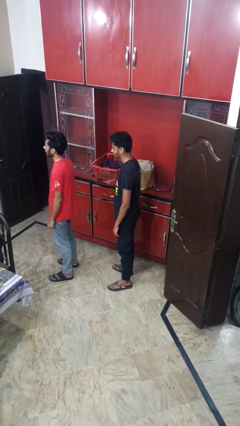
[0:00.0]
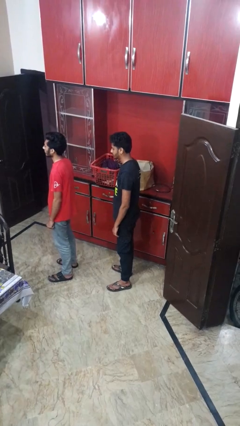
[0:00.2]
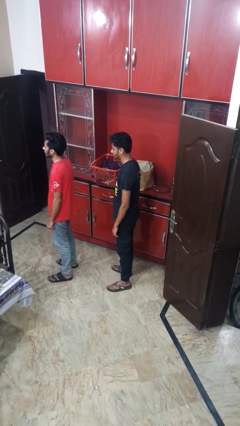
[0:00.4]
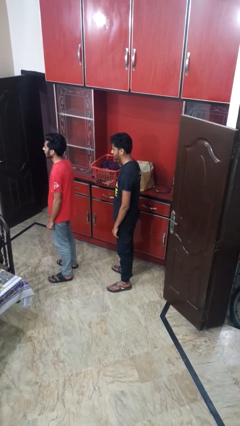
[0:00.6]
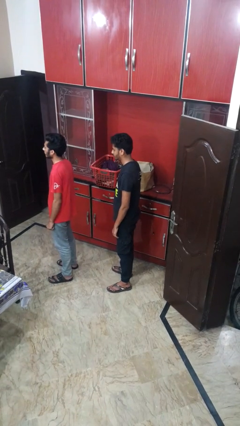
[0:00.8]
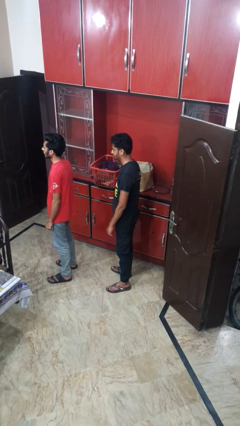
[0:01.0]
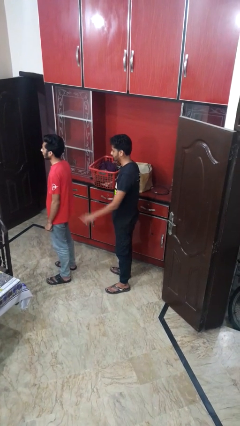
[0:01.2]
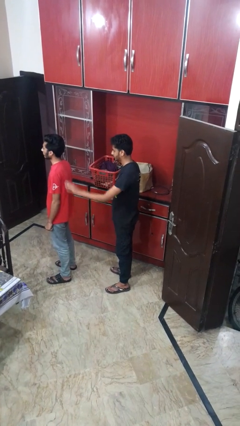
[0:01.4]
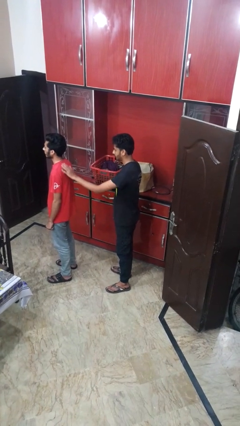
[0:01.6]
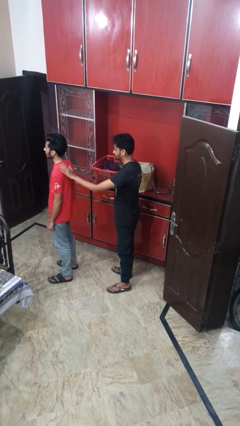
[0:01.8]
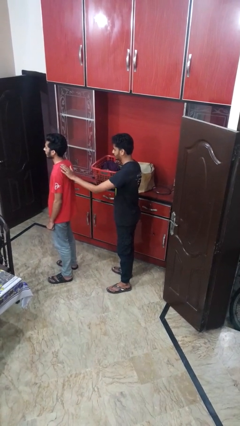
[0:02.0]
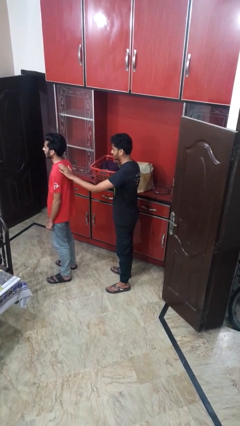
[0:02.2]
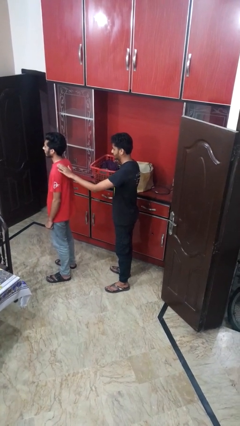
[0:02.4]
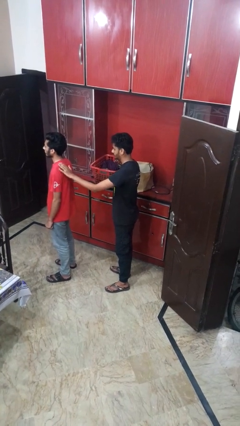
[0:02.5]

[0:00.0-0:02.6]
person gestures come here

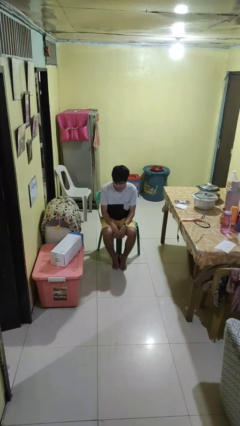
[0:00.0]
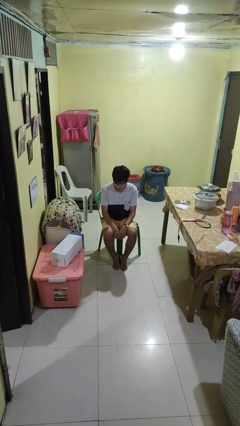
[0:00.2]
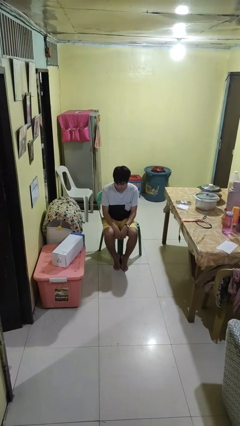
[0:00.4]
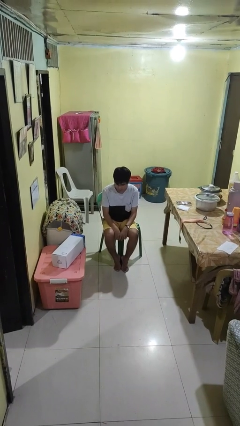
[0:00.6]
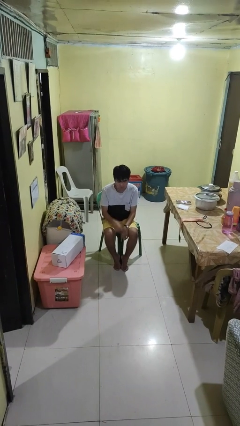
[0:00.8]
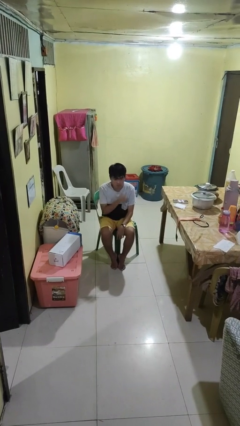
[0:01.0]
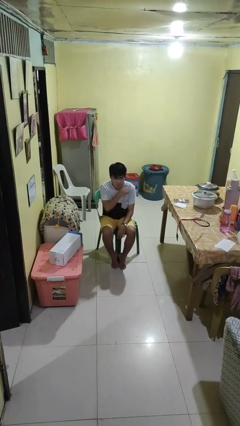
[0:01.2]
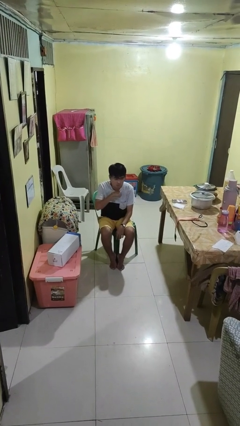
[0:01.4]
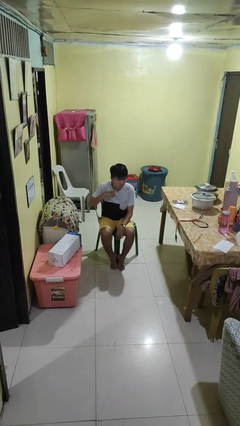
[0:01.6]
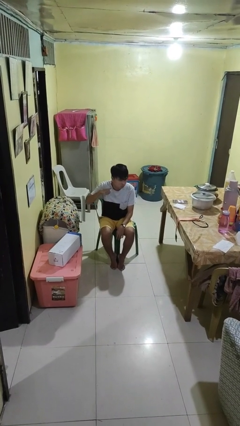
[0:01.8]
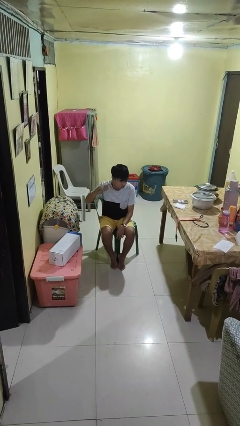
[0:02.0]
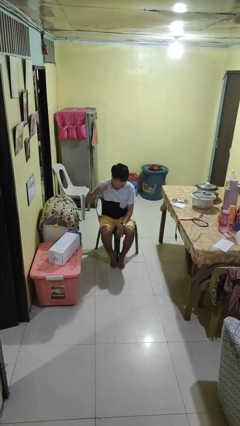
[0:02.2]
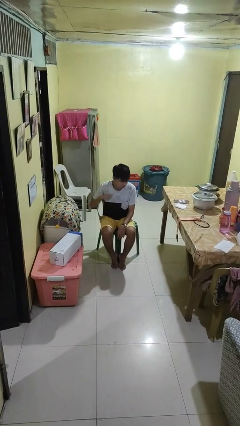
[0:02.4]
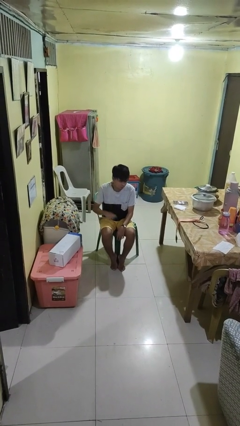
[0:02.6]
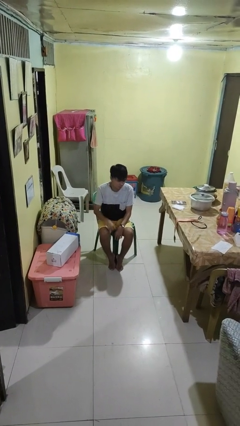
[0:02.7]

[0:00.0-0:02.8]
person gestures cut

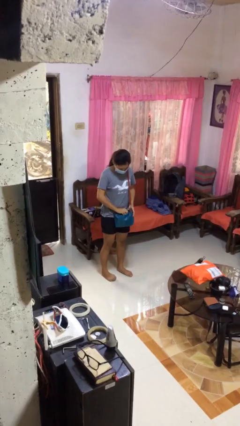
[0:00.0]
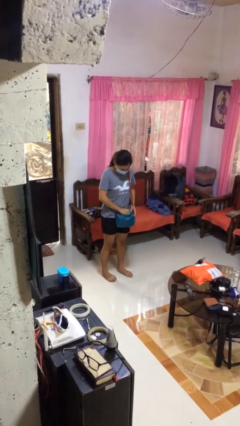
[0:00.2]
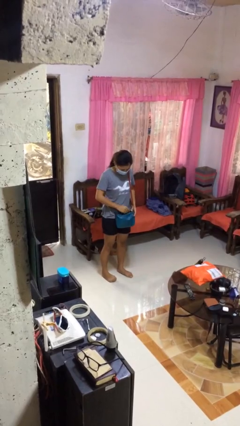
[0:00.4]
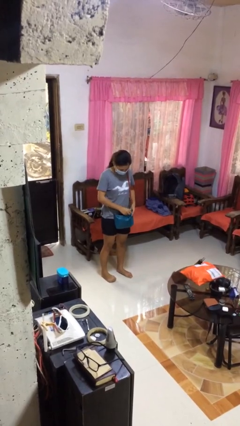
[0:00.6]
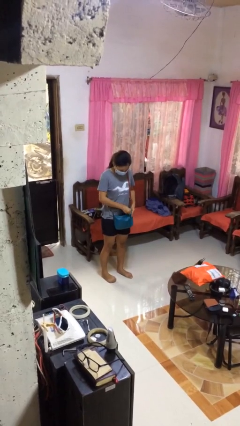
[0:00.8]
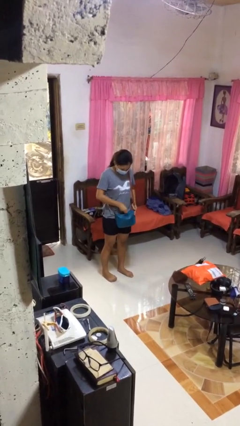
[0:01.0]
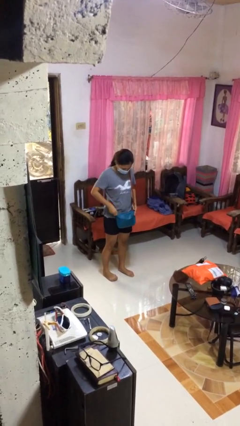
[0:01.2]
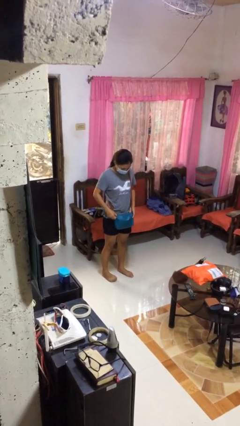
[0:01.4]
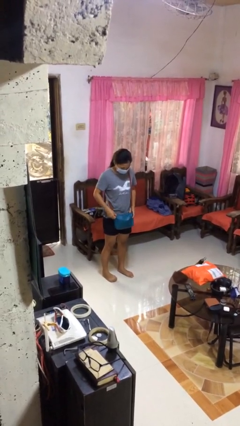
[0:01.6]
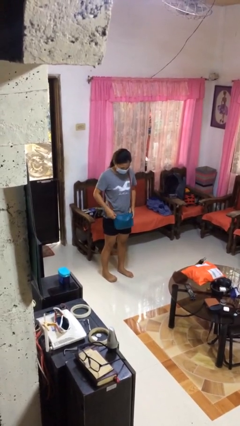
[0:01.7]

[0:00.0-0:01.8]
person puts object into purse

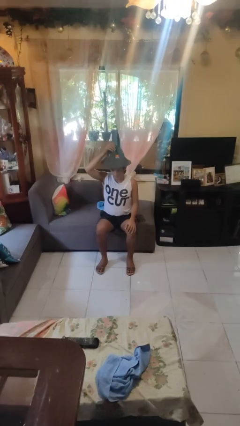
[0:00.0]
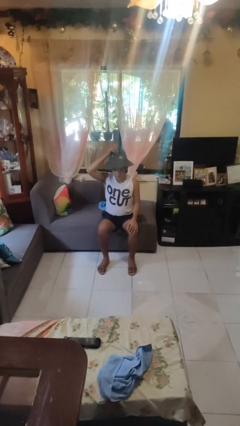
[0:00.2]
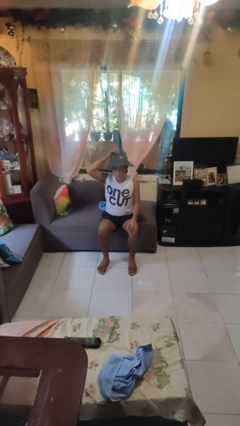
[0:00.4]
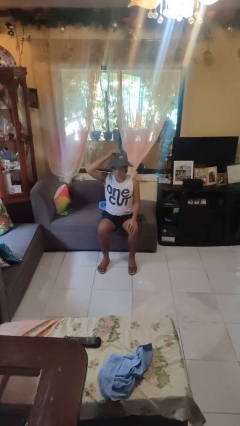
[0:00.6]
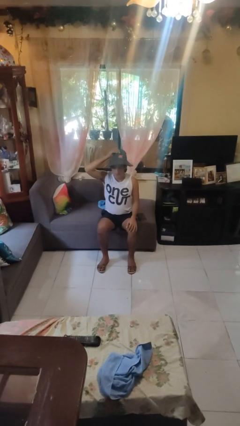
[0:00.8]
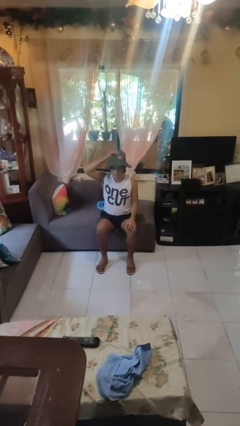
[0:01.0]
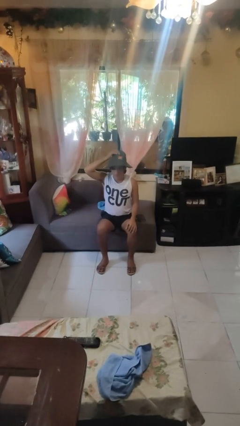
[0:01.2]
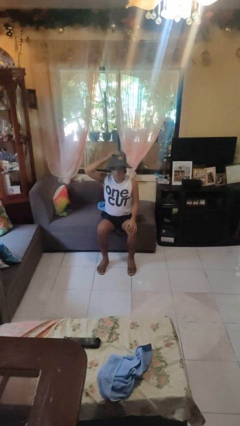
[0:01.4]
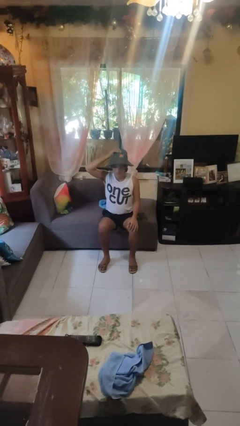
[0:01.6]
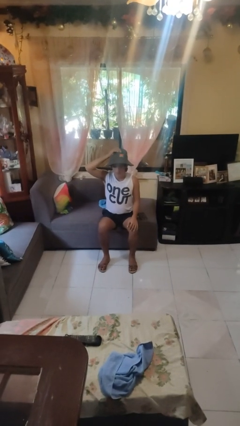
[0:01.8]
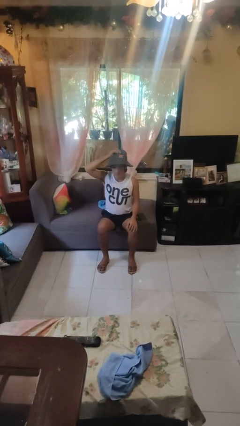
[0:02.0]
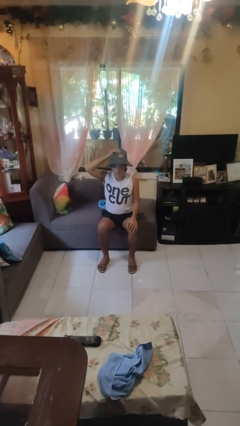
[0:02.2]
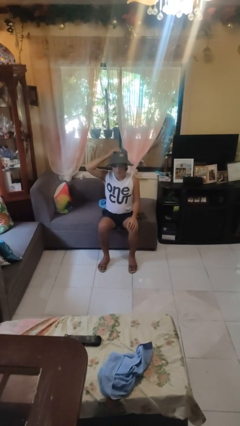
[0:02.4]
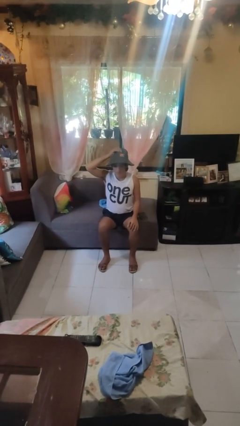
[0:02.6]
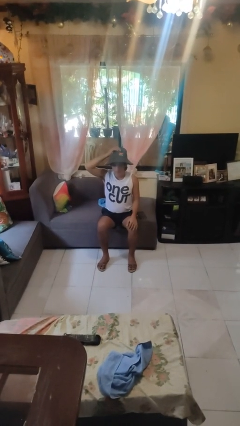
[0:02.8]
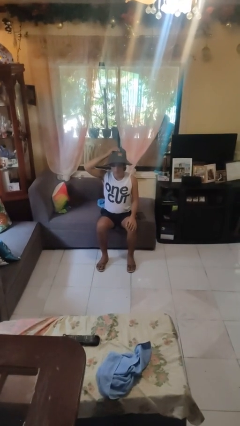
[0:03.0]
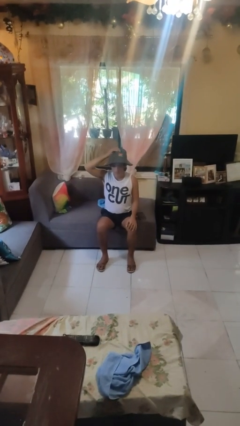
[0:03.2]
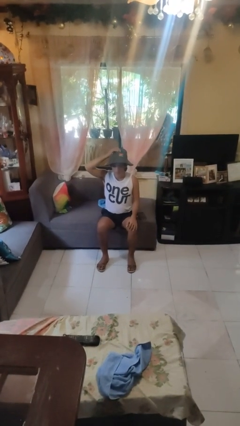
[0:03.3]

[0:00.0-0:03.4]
person puts on hat

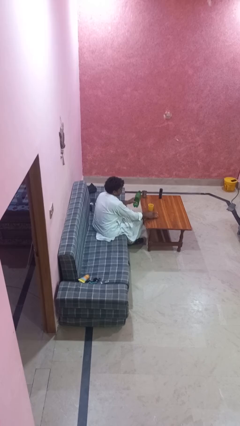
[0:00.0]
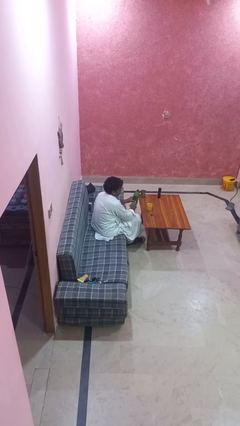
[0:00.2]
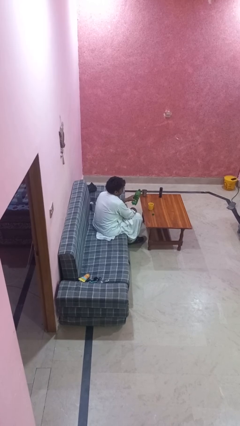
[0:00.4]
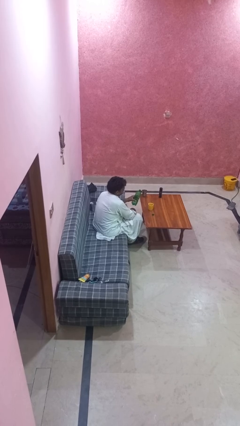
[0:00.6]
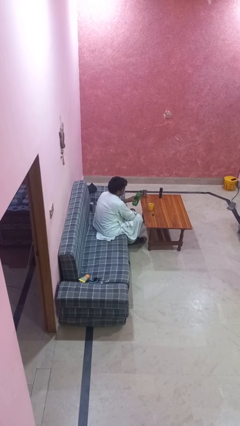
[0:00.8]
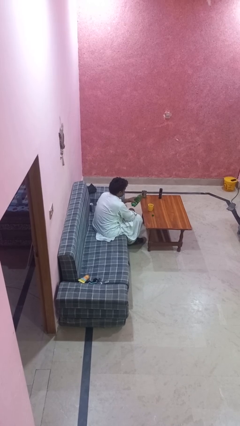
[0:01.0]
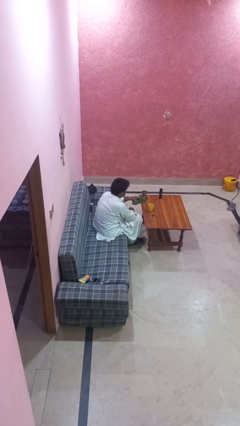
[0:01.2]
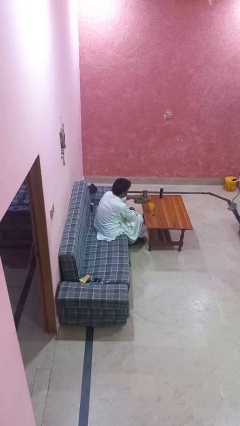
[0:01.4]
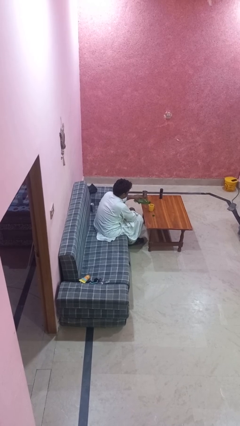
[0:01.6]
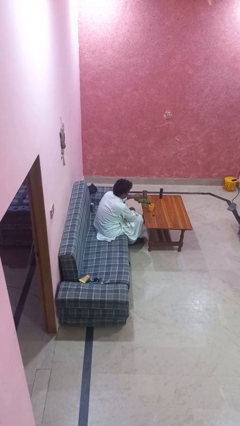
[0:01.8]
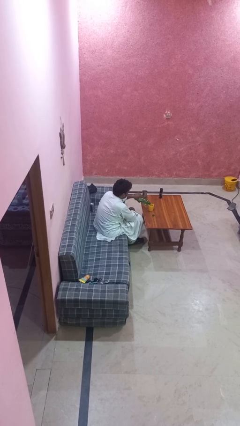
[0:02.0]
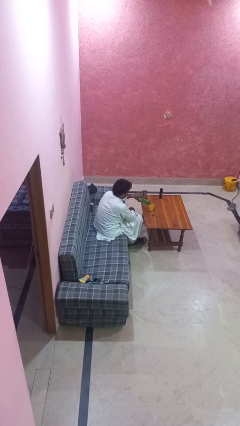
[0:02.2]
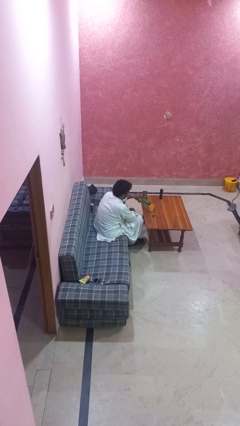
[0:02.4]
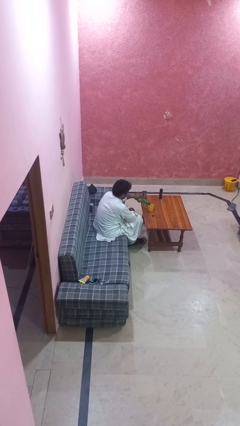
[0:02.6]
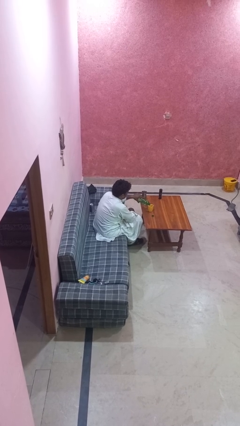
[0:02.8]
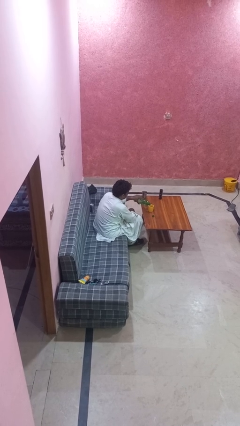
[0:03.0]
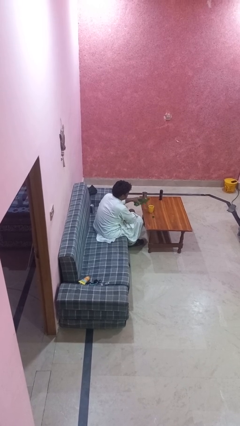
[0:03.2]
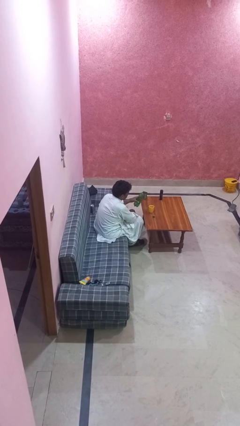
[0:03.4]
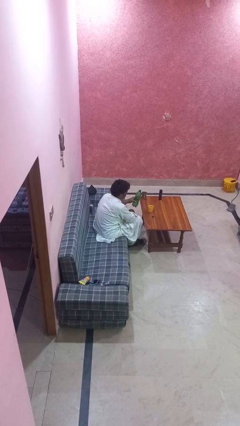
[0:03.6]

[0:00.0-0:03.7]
person pours liquid into cup

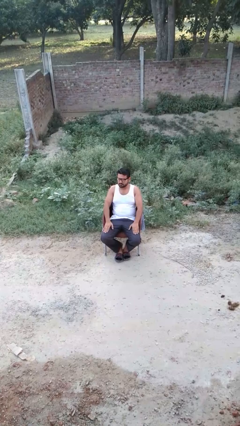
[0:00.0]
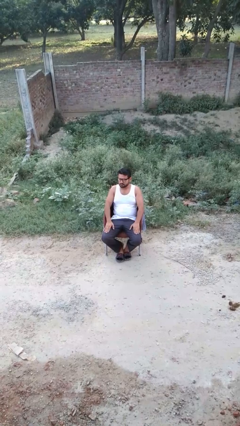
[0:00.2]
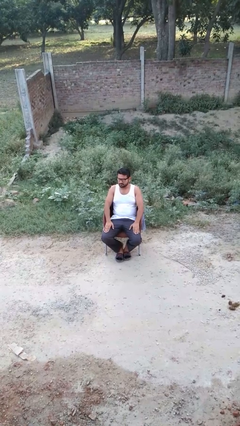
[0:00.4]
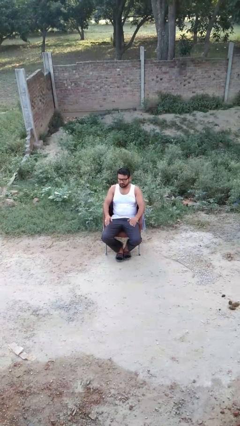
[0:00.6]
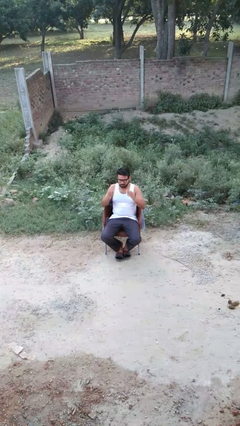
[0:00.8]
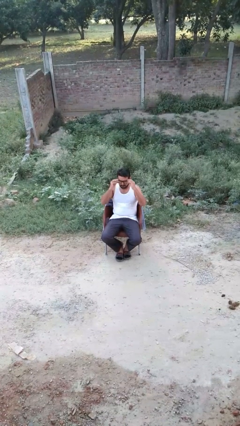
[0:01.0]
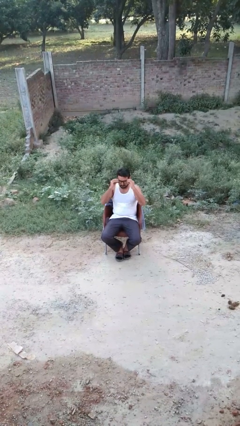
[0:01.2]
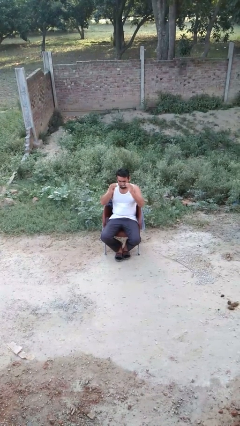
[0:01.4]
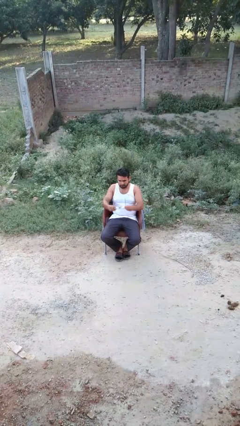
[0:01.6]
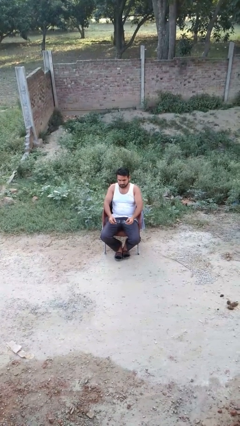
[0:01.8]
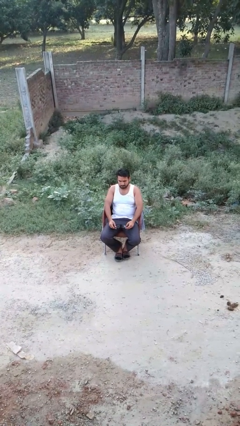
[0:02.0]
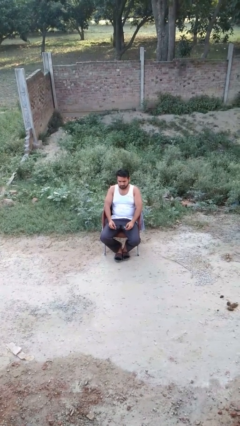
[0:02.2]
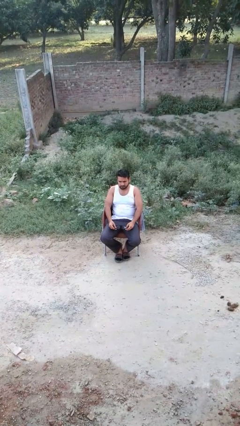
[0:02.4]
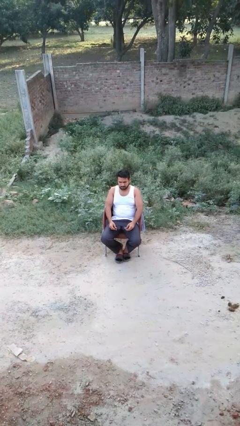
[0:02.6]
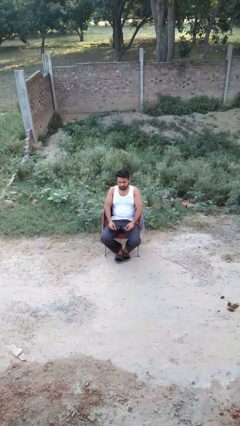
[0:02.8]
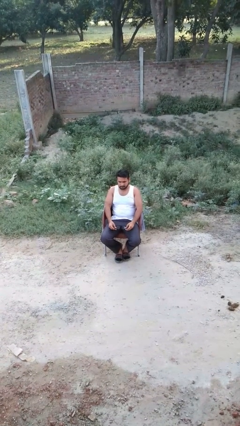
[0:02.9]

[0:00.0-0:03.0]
person takes off glasses
